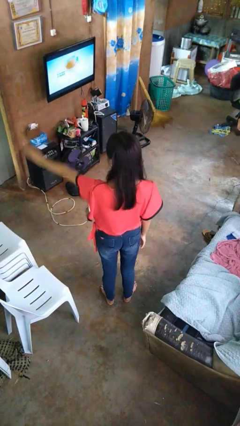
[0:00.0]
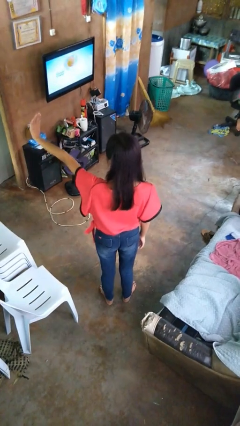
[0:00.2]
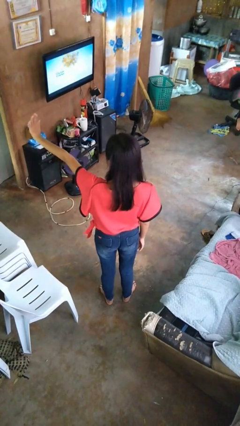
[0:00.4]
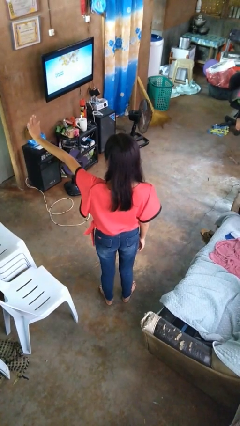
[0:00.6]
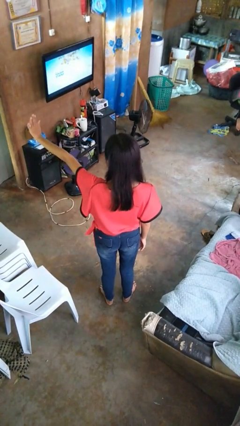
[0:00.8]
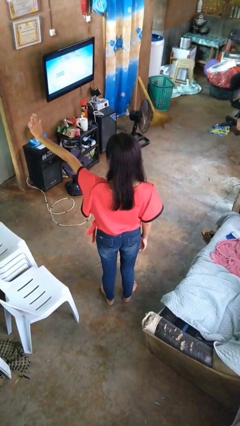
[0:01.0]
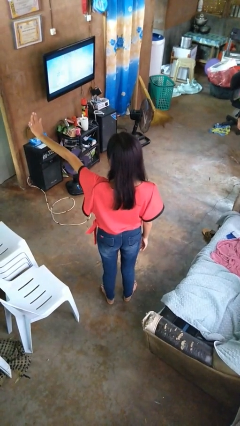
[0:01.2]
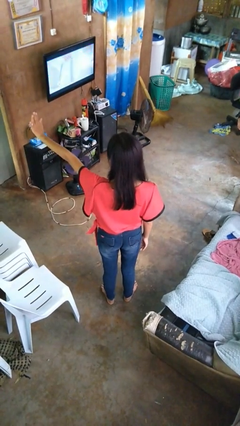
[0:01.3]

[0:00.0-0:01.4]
person gestures stop

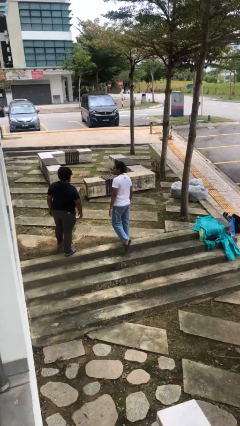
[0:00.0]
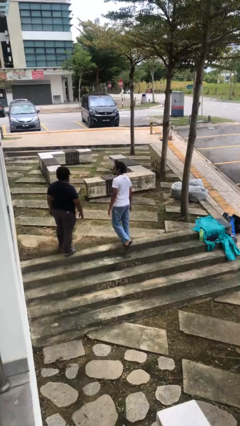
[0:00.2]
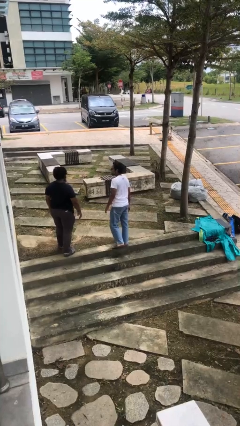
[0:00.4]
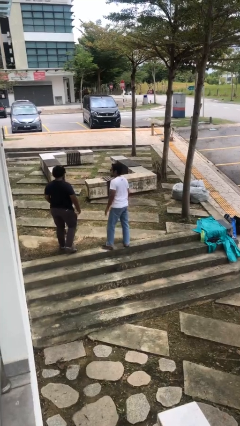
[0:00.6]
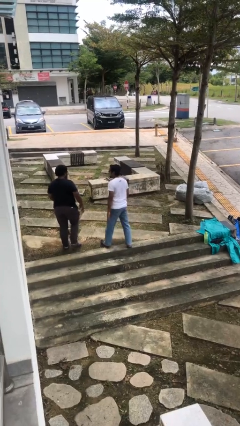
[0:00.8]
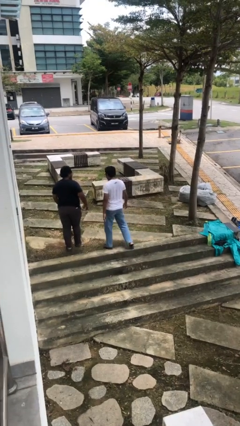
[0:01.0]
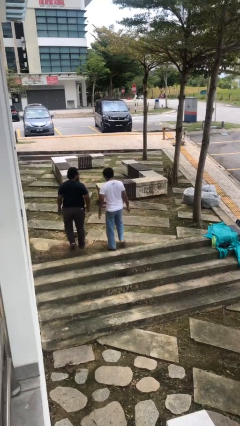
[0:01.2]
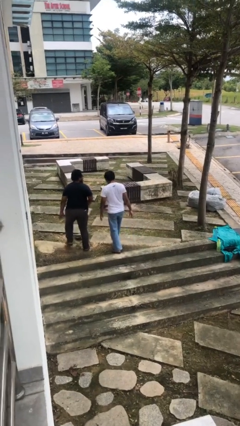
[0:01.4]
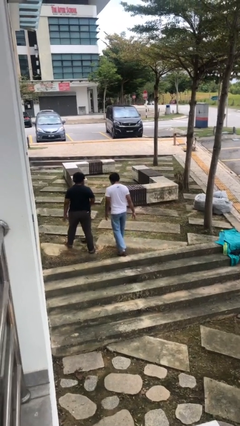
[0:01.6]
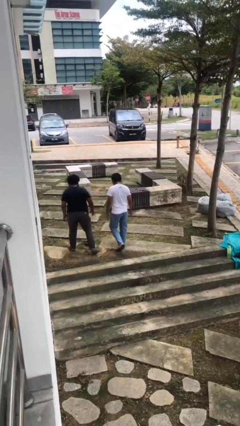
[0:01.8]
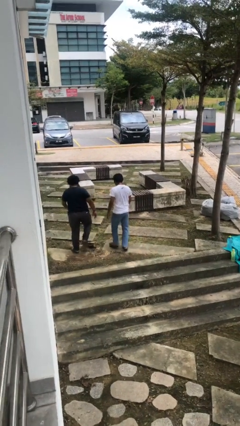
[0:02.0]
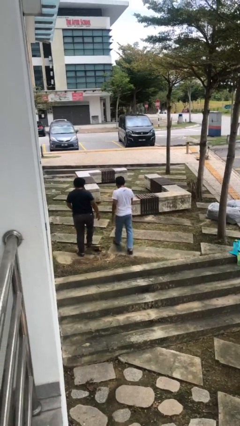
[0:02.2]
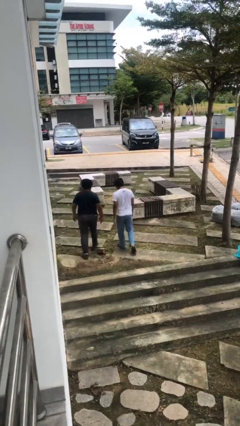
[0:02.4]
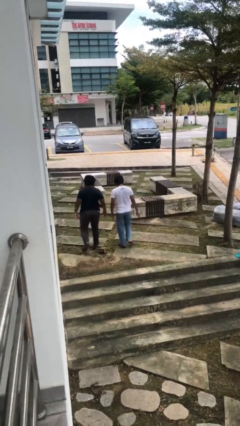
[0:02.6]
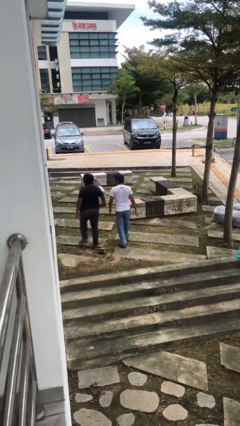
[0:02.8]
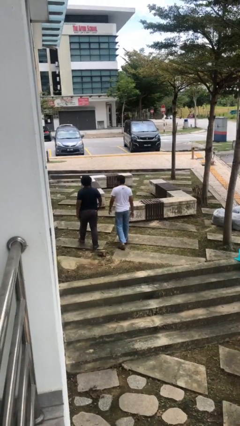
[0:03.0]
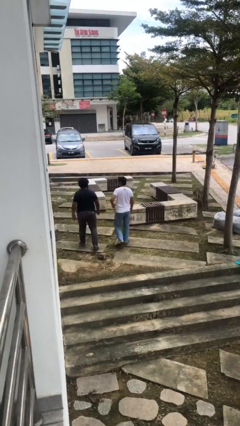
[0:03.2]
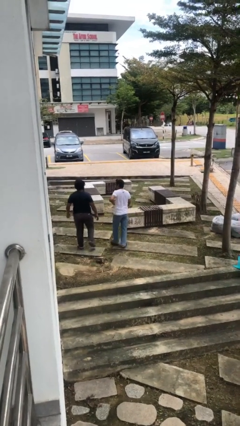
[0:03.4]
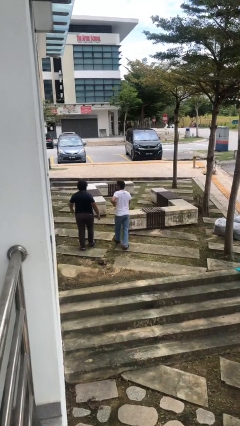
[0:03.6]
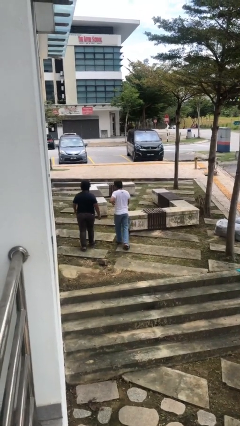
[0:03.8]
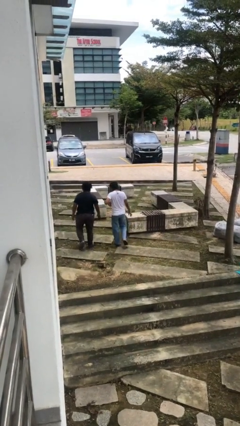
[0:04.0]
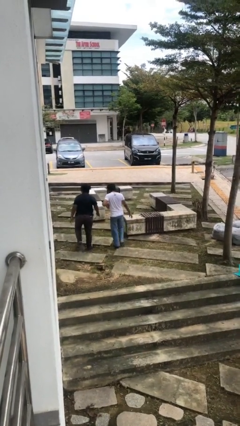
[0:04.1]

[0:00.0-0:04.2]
person talks to person

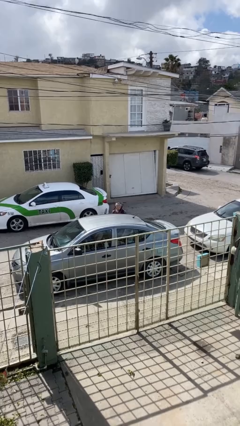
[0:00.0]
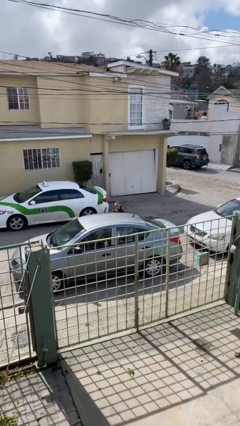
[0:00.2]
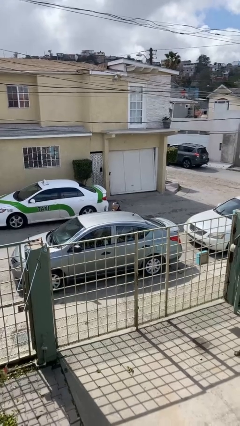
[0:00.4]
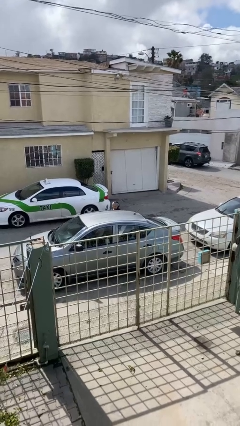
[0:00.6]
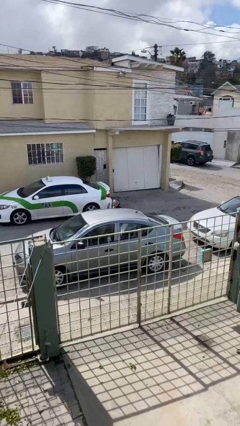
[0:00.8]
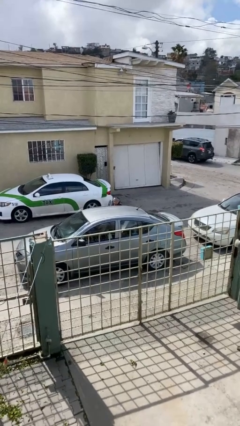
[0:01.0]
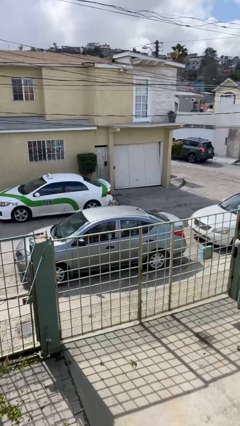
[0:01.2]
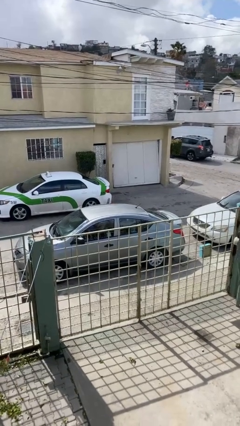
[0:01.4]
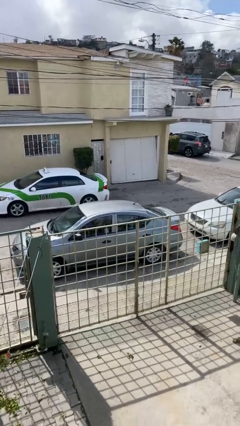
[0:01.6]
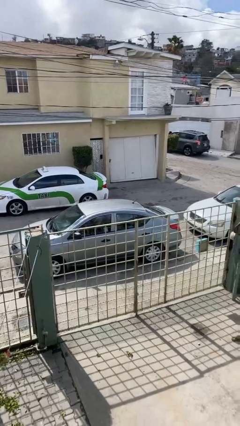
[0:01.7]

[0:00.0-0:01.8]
person enters car

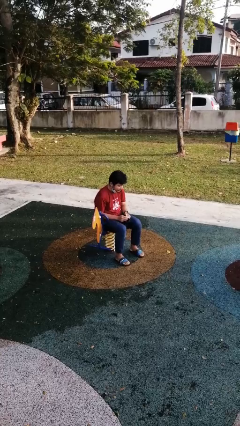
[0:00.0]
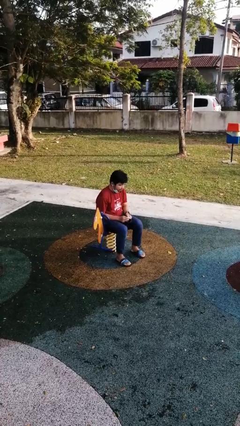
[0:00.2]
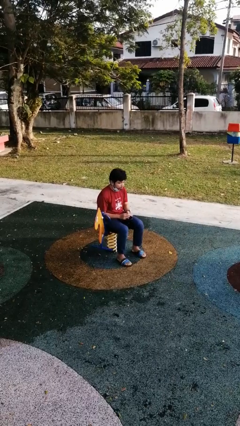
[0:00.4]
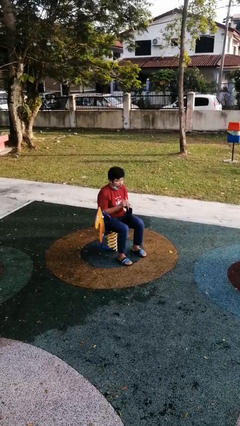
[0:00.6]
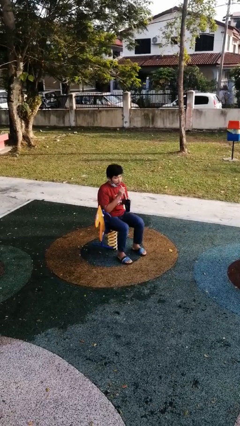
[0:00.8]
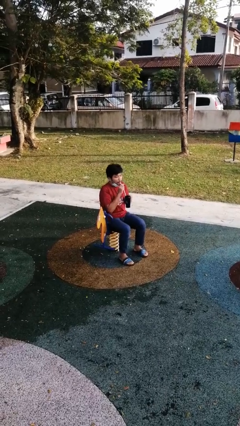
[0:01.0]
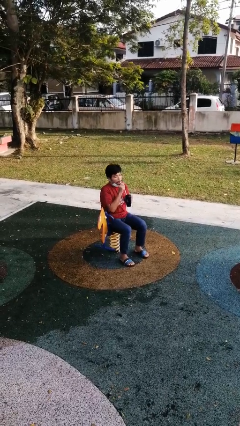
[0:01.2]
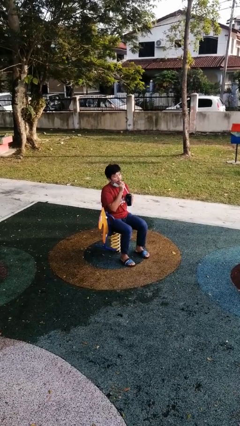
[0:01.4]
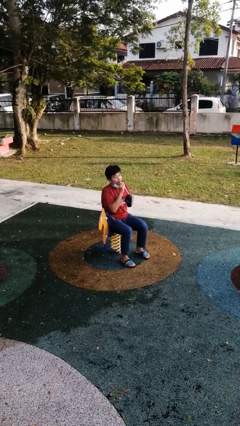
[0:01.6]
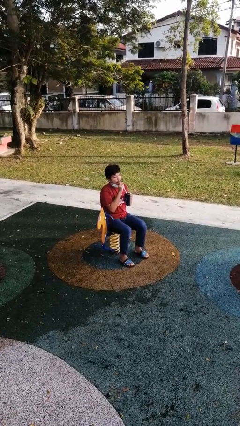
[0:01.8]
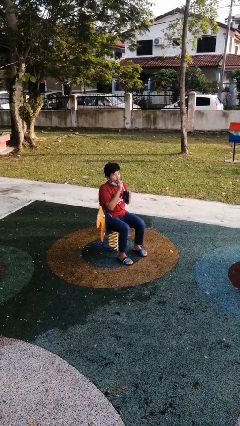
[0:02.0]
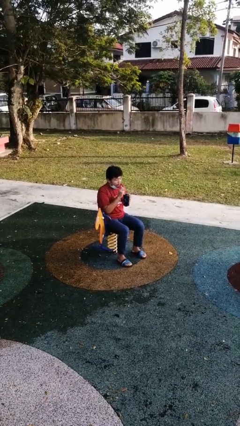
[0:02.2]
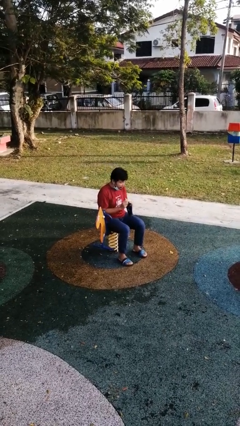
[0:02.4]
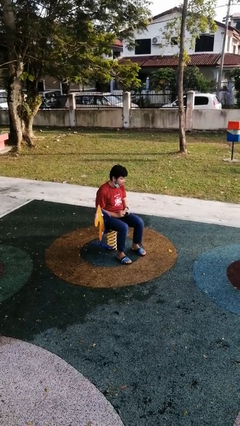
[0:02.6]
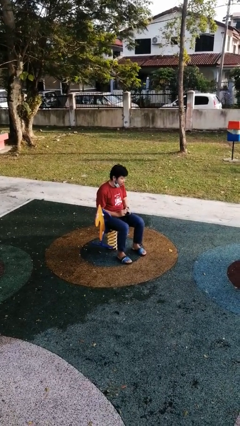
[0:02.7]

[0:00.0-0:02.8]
person drinks from straw

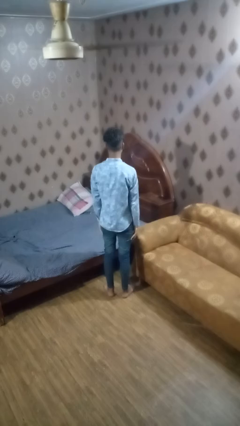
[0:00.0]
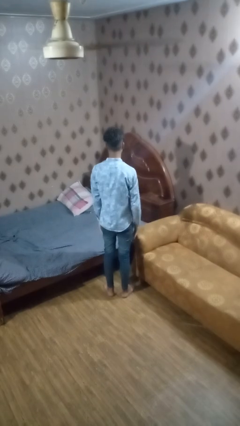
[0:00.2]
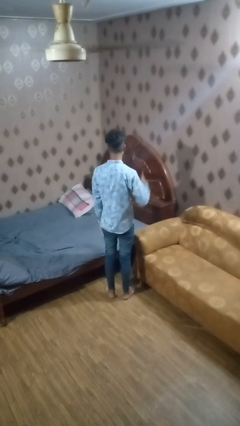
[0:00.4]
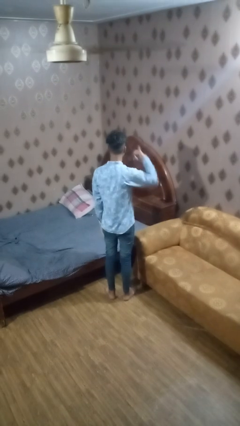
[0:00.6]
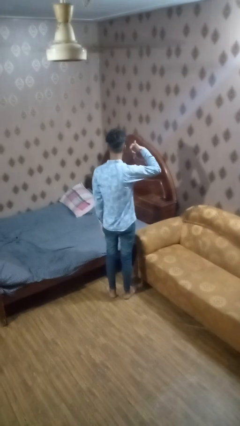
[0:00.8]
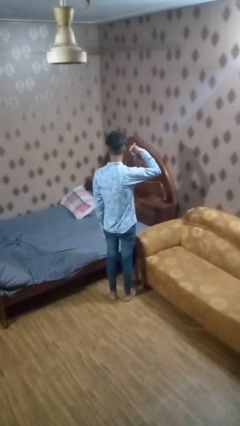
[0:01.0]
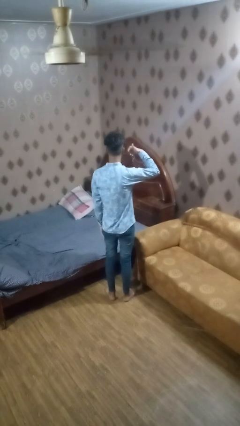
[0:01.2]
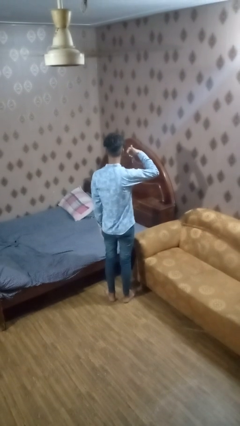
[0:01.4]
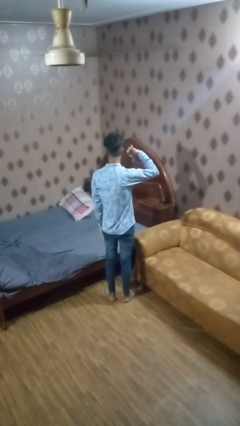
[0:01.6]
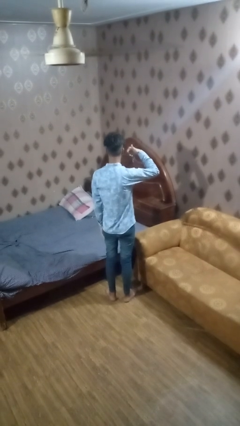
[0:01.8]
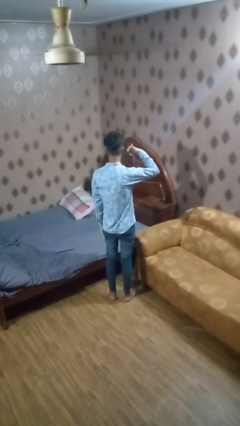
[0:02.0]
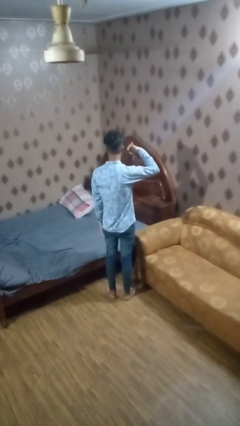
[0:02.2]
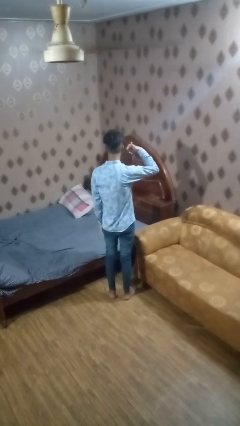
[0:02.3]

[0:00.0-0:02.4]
person gestures call me

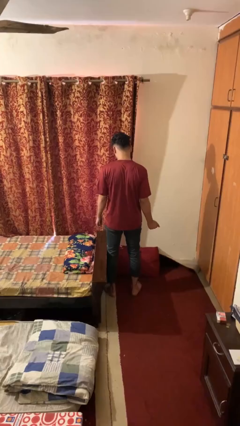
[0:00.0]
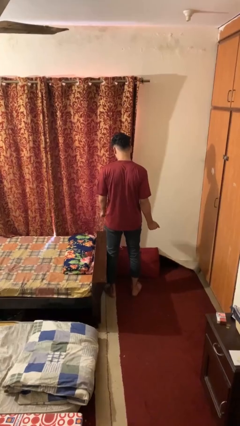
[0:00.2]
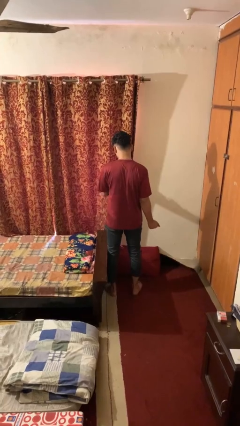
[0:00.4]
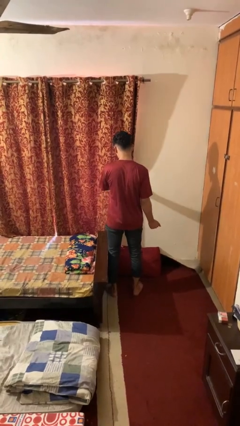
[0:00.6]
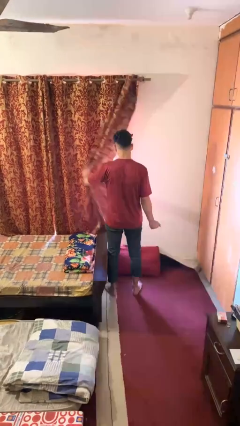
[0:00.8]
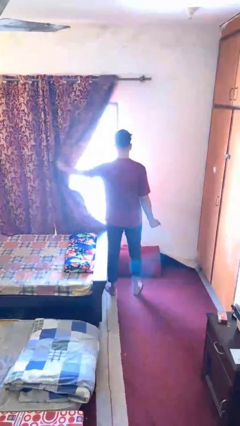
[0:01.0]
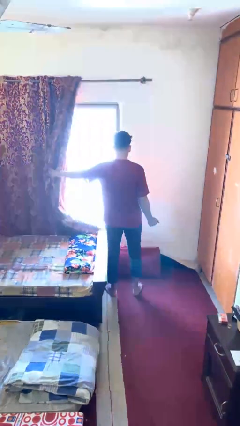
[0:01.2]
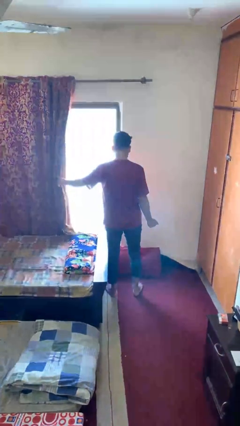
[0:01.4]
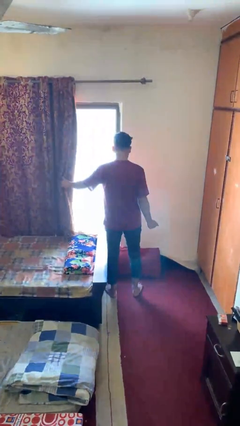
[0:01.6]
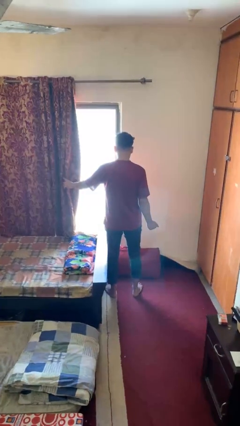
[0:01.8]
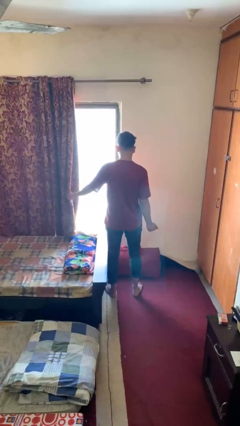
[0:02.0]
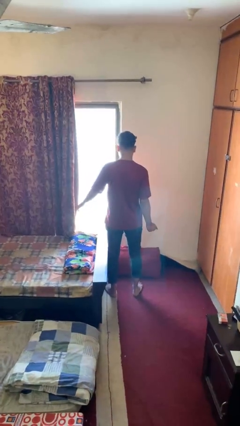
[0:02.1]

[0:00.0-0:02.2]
person opens curtains

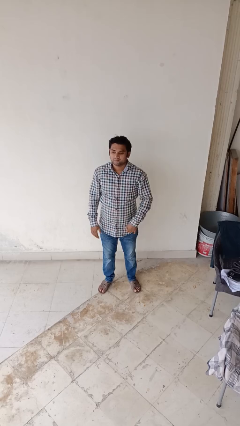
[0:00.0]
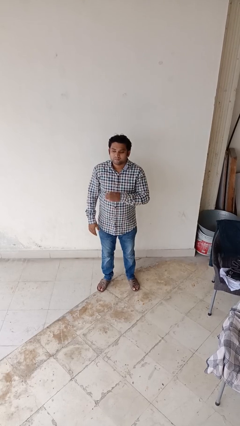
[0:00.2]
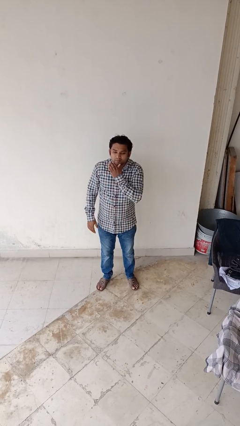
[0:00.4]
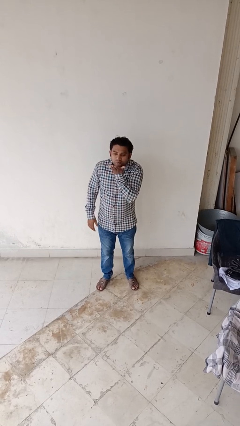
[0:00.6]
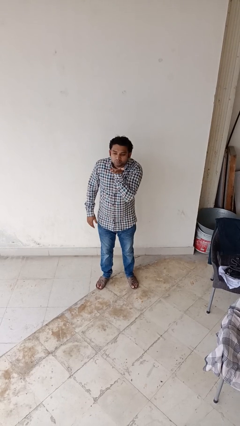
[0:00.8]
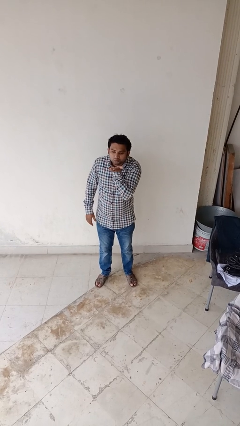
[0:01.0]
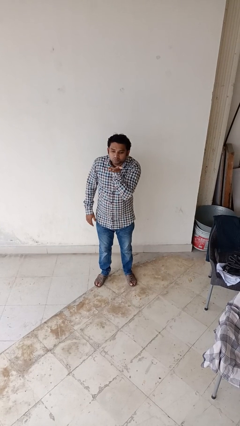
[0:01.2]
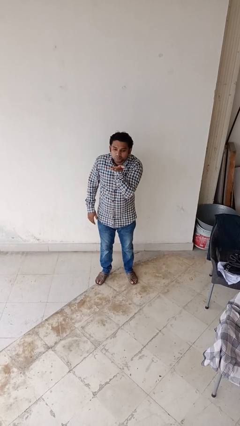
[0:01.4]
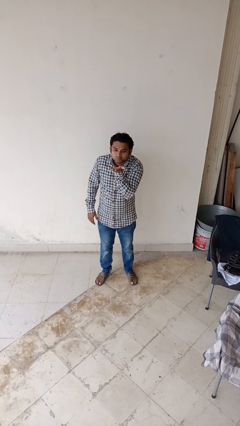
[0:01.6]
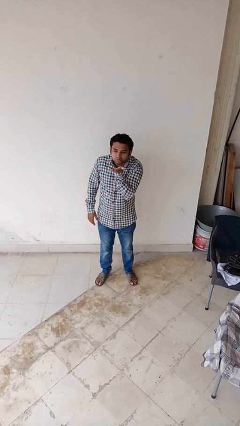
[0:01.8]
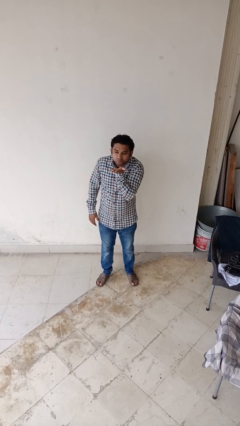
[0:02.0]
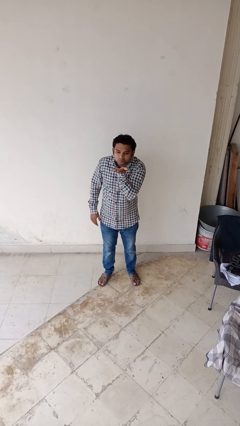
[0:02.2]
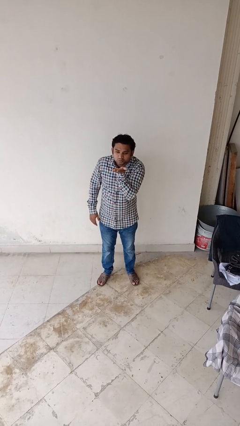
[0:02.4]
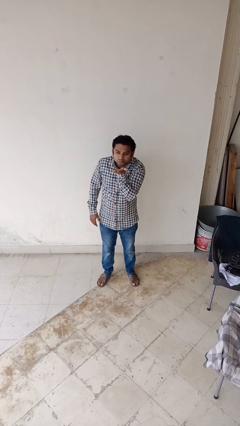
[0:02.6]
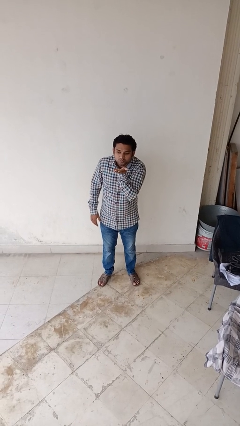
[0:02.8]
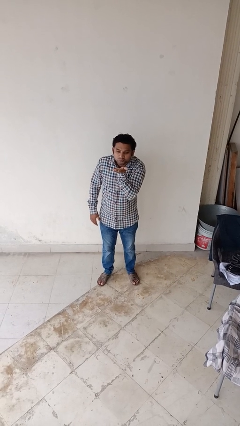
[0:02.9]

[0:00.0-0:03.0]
person gestures blow kiss
